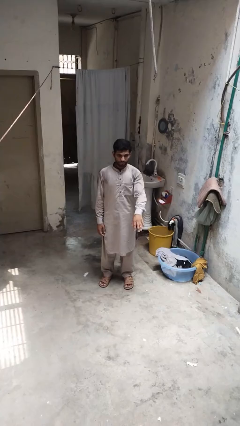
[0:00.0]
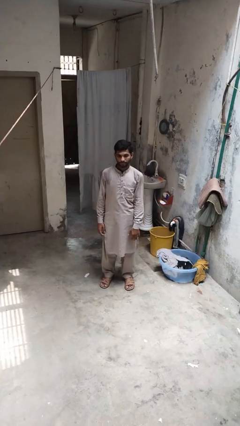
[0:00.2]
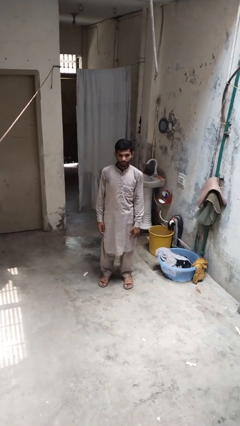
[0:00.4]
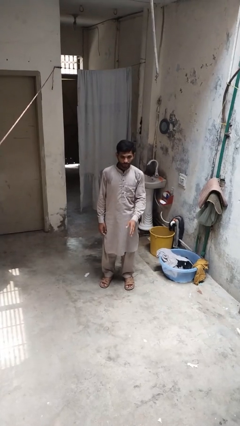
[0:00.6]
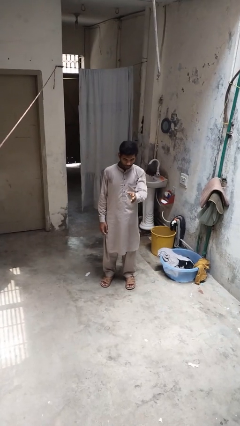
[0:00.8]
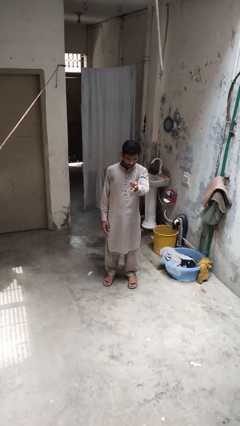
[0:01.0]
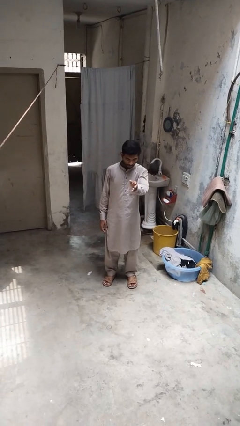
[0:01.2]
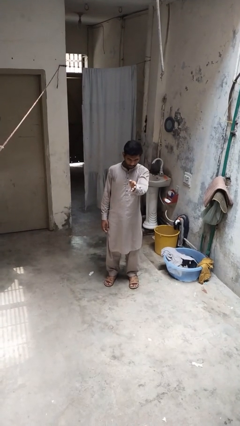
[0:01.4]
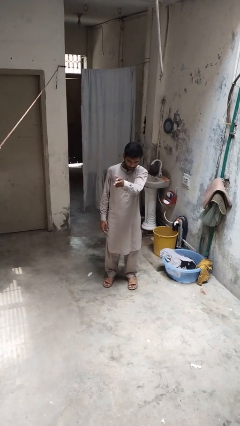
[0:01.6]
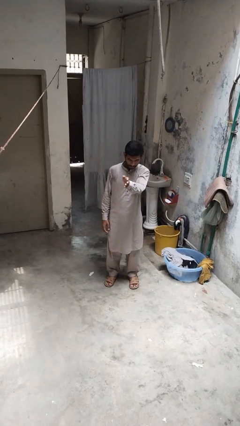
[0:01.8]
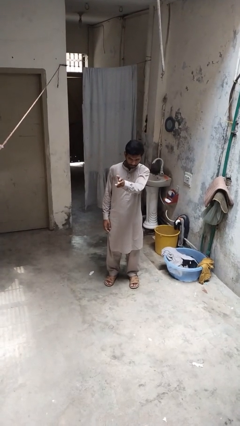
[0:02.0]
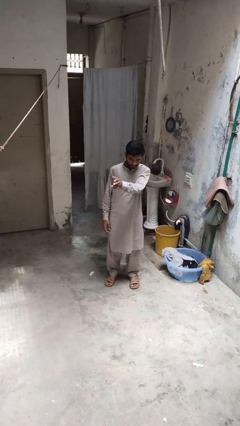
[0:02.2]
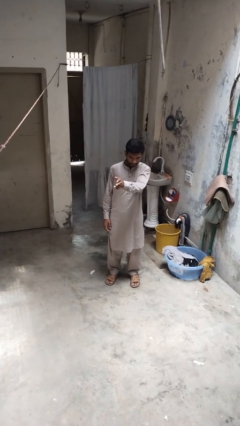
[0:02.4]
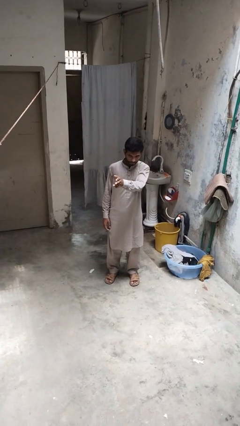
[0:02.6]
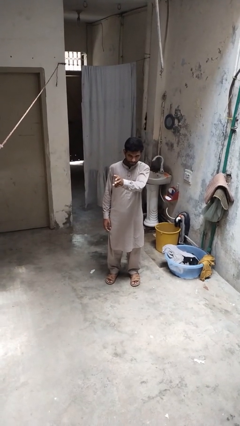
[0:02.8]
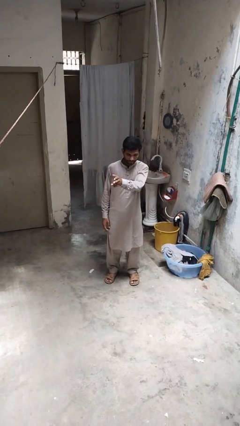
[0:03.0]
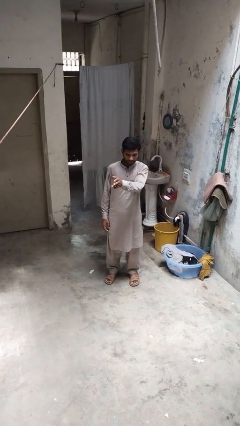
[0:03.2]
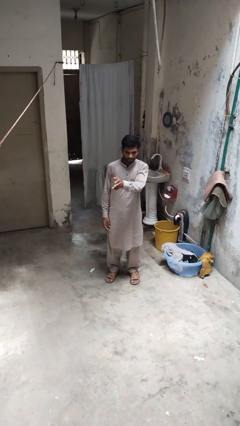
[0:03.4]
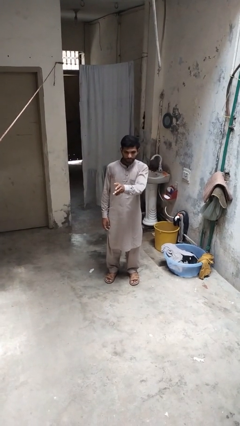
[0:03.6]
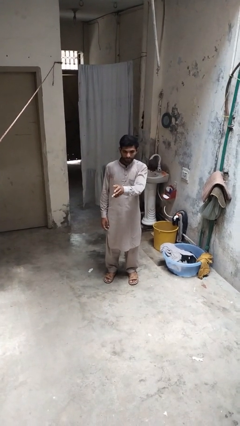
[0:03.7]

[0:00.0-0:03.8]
person gestures swipe right

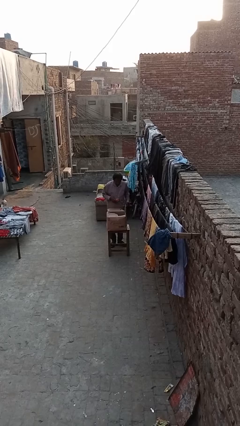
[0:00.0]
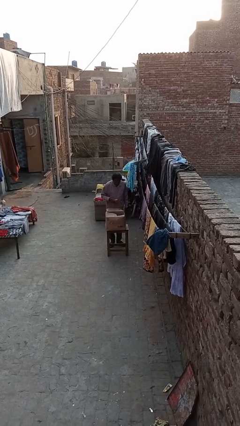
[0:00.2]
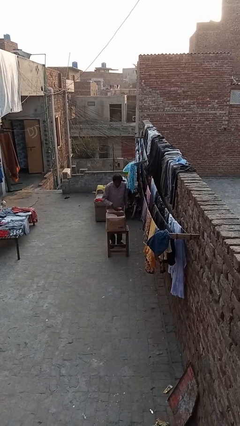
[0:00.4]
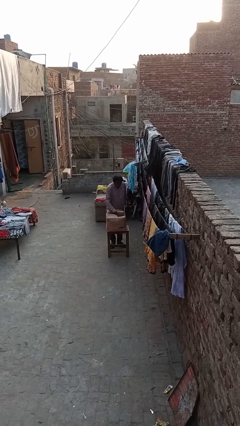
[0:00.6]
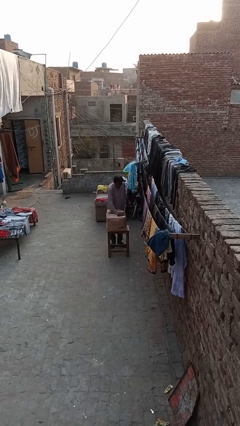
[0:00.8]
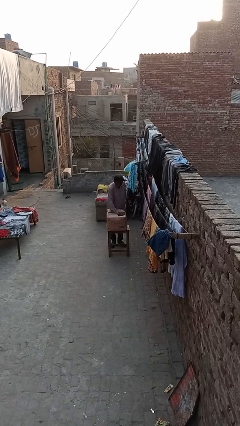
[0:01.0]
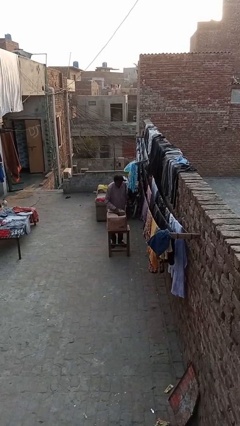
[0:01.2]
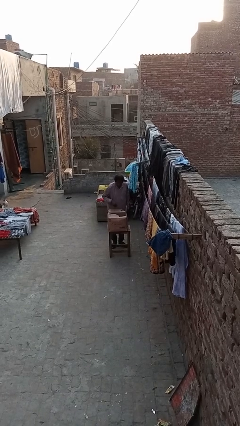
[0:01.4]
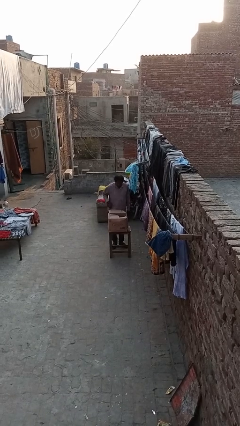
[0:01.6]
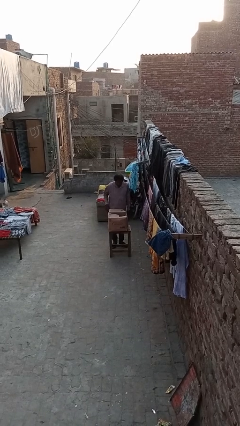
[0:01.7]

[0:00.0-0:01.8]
person puts object into box

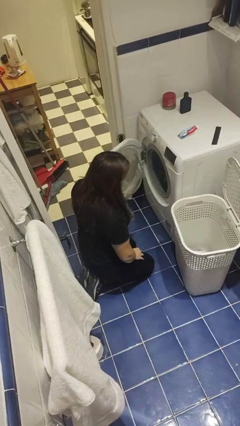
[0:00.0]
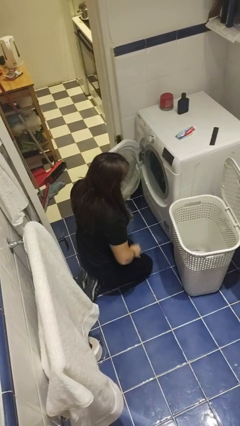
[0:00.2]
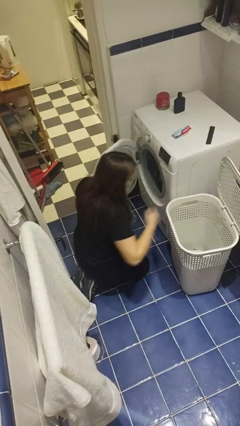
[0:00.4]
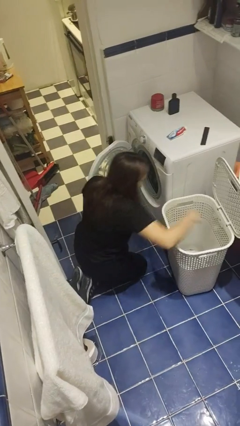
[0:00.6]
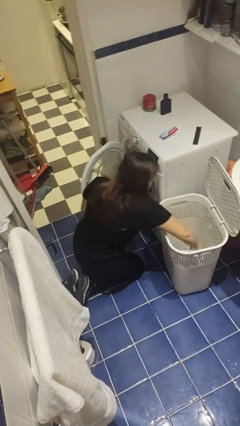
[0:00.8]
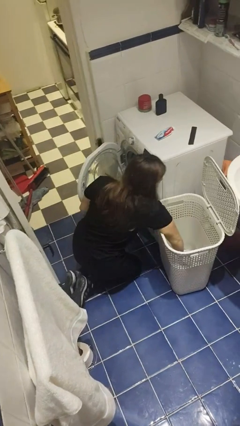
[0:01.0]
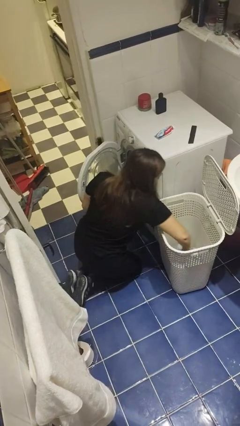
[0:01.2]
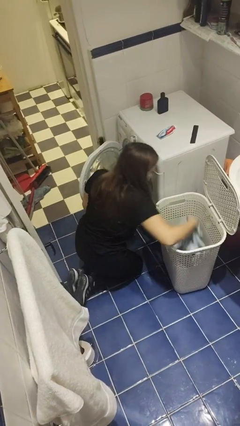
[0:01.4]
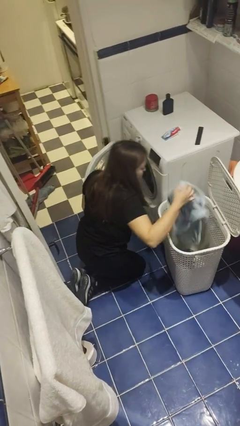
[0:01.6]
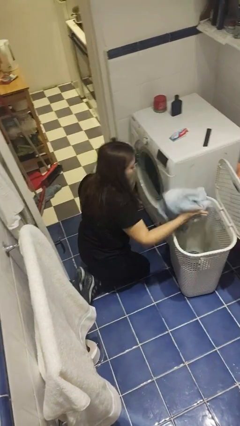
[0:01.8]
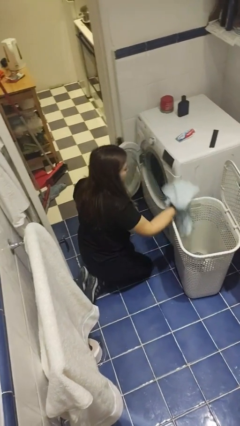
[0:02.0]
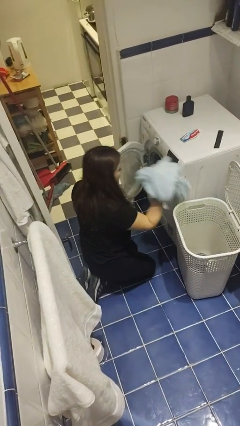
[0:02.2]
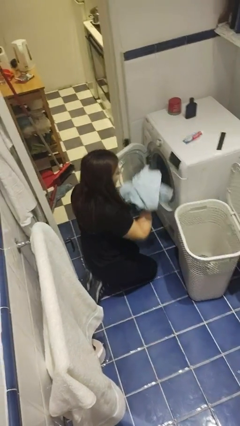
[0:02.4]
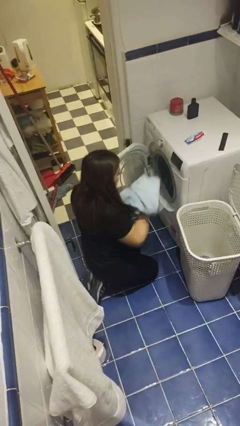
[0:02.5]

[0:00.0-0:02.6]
person unloads clotheswasher

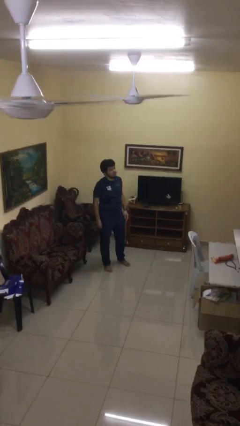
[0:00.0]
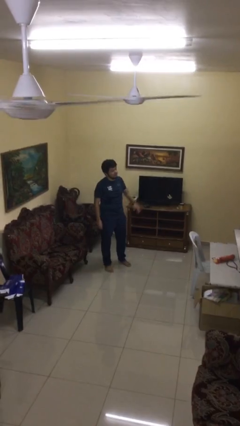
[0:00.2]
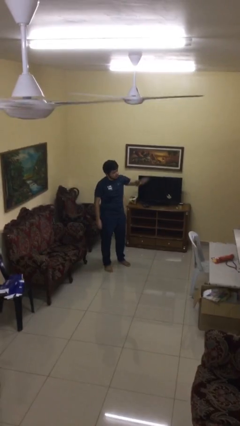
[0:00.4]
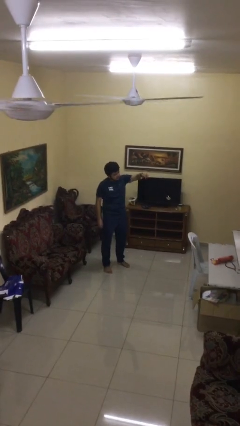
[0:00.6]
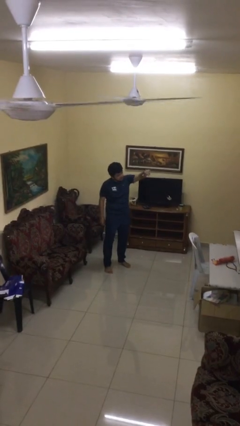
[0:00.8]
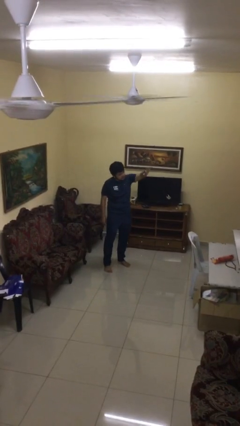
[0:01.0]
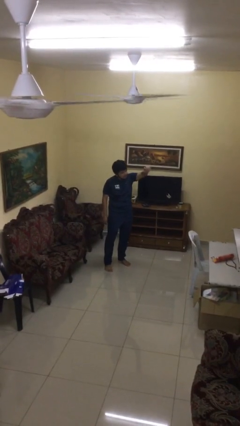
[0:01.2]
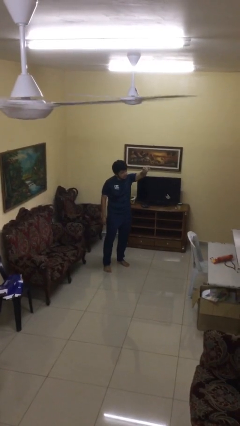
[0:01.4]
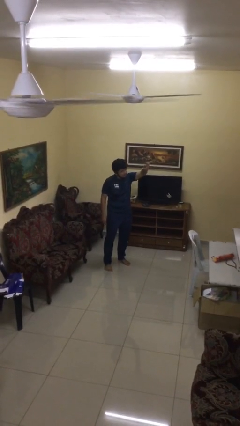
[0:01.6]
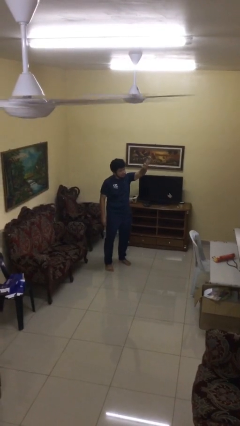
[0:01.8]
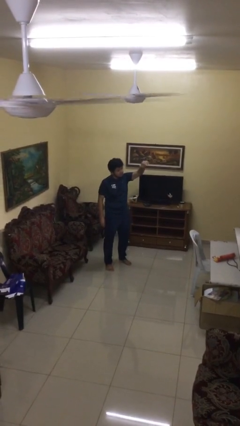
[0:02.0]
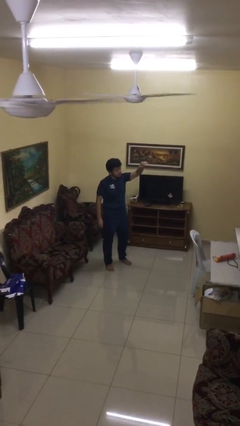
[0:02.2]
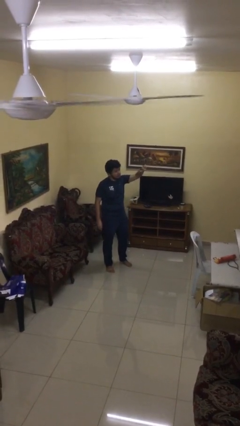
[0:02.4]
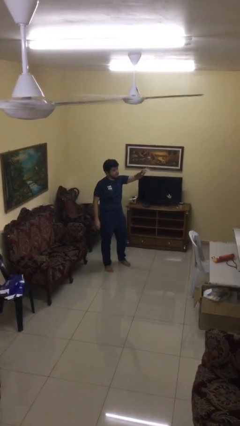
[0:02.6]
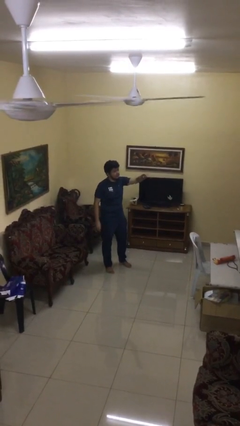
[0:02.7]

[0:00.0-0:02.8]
person gestures come here

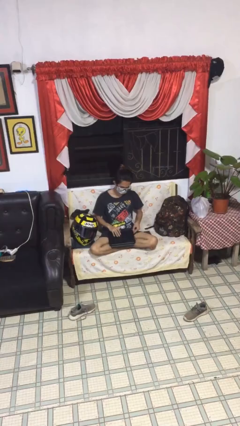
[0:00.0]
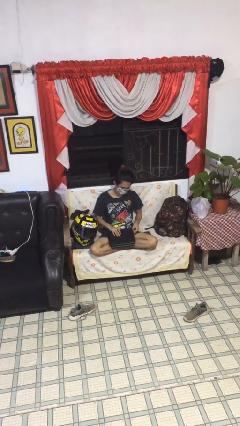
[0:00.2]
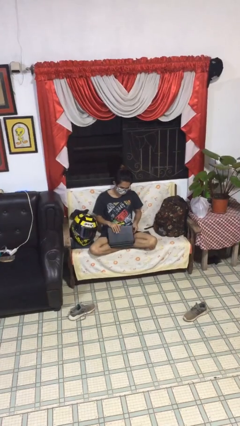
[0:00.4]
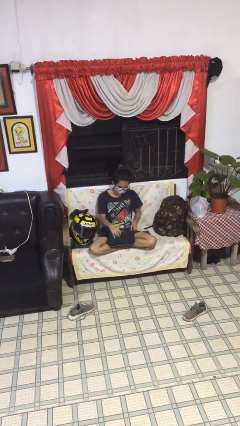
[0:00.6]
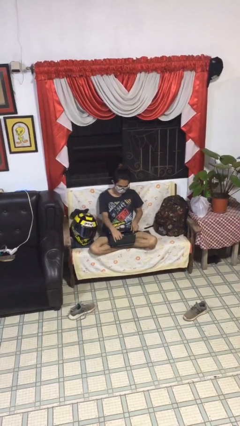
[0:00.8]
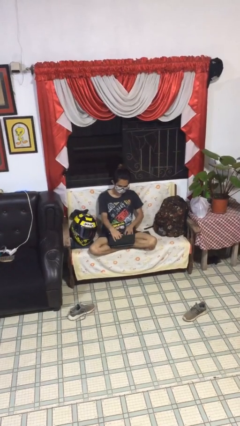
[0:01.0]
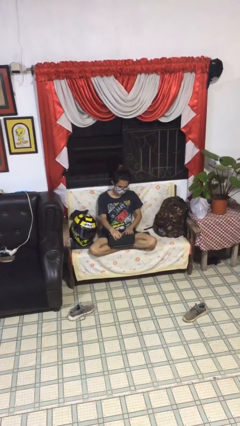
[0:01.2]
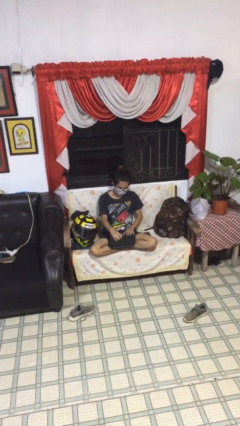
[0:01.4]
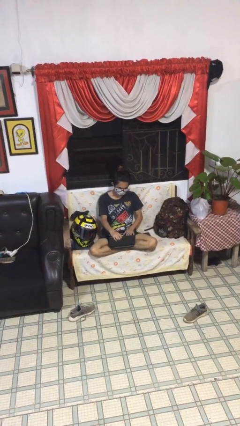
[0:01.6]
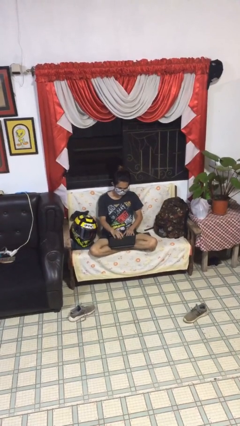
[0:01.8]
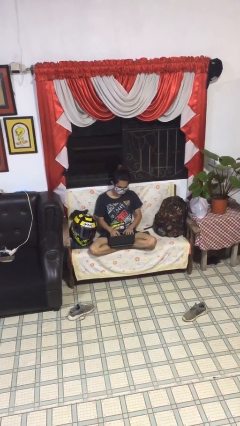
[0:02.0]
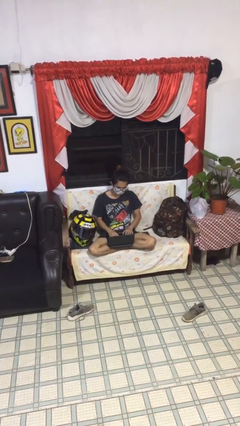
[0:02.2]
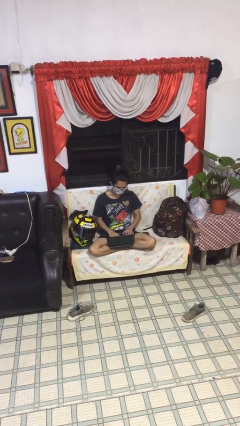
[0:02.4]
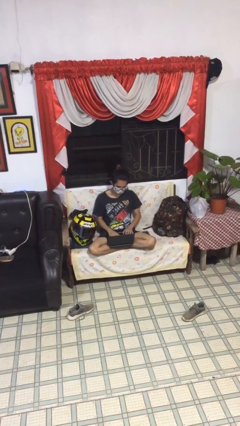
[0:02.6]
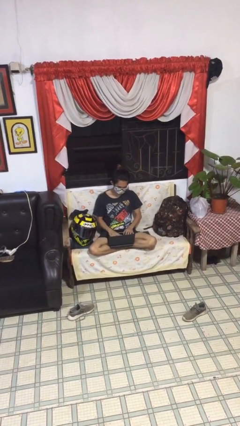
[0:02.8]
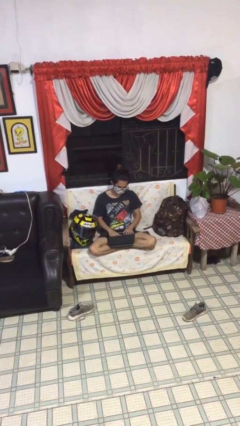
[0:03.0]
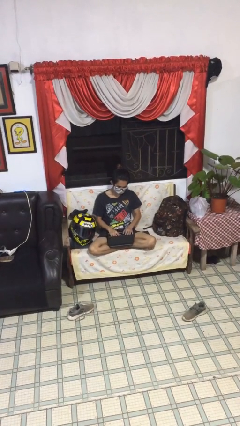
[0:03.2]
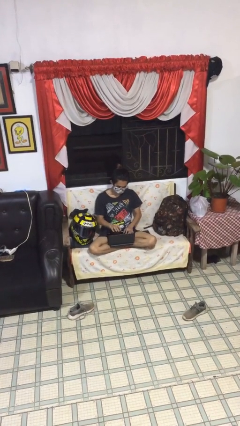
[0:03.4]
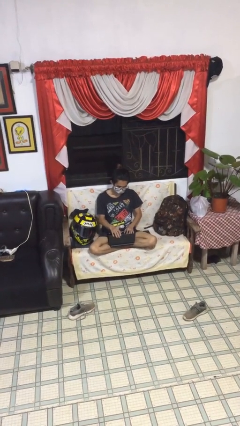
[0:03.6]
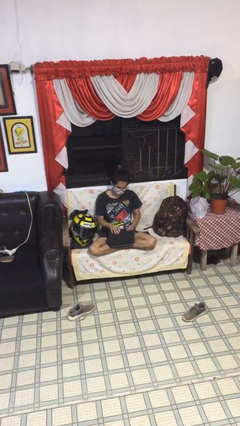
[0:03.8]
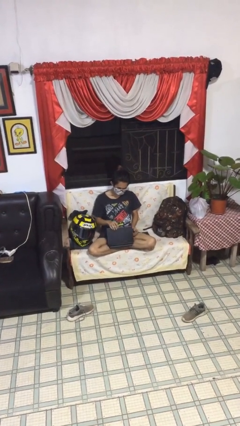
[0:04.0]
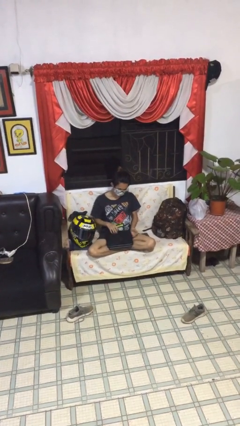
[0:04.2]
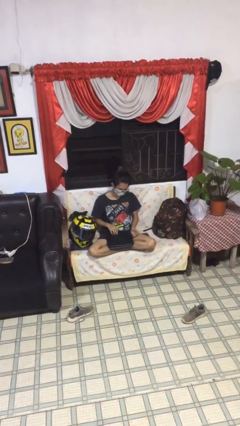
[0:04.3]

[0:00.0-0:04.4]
person interacts with laptop

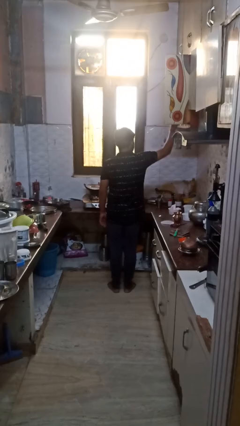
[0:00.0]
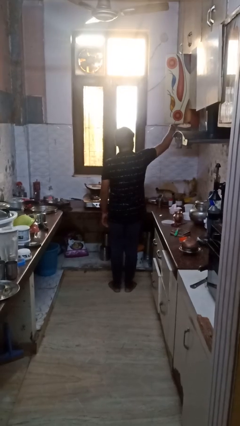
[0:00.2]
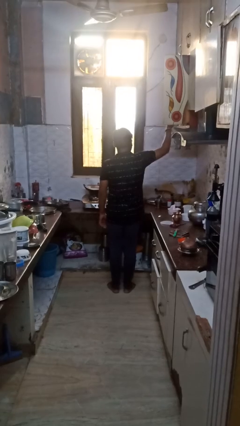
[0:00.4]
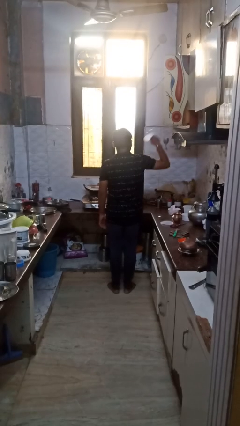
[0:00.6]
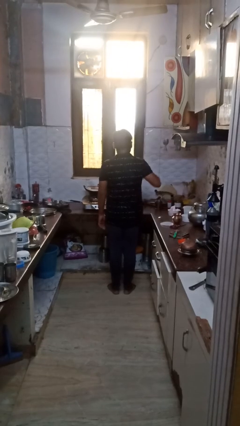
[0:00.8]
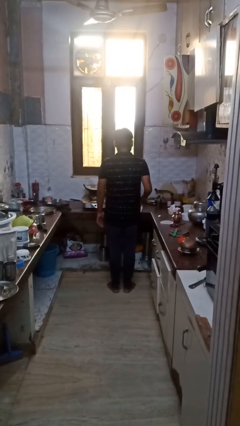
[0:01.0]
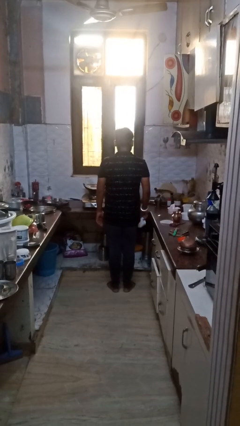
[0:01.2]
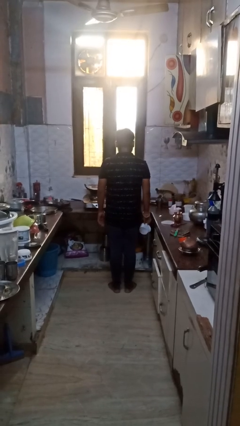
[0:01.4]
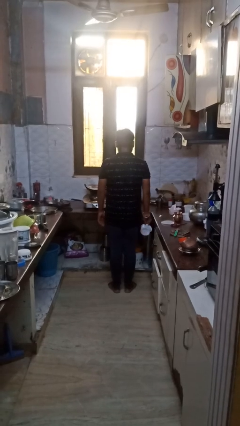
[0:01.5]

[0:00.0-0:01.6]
person puts object in cabinet

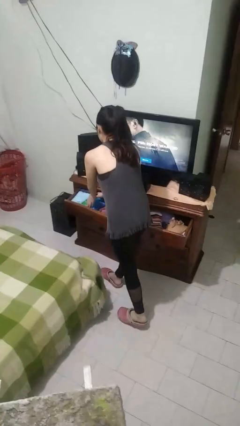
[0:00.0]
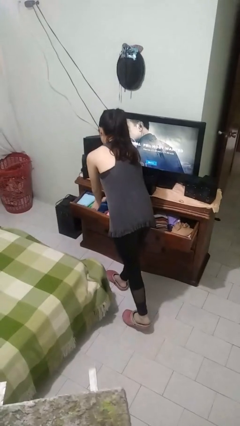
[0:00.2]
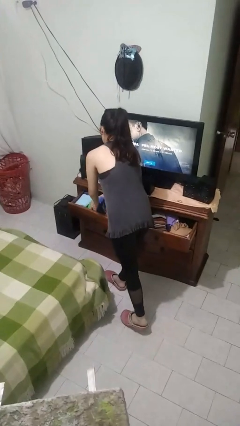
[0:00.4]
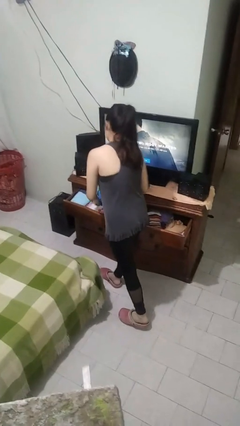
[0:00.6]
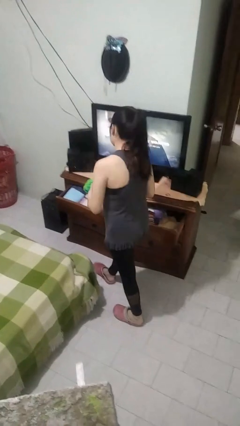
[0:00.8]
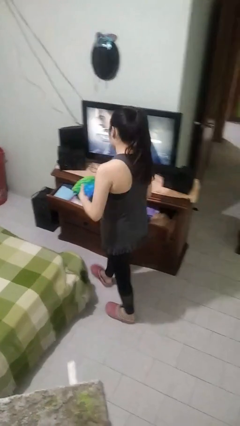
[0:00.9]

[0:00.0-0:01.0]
person takes clothes from dresser
